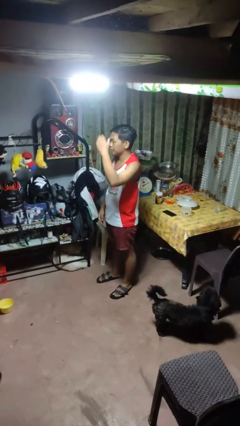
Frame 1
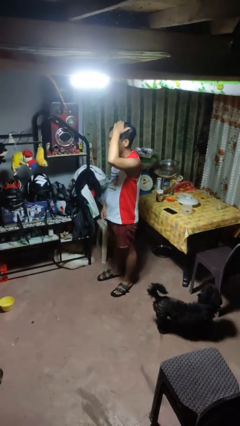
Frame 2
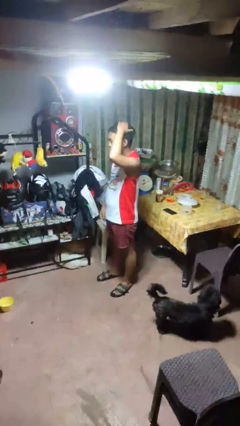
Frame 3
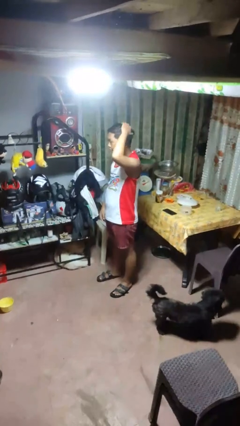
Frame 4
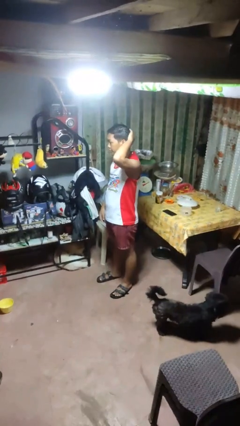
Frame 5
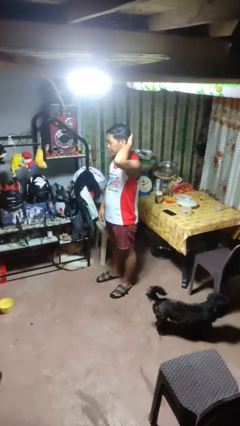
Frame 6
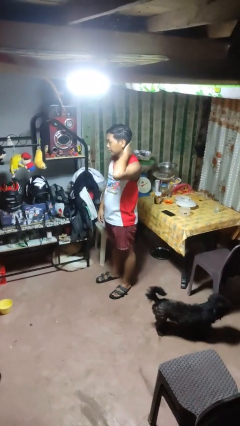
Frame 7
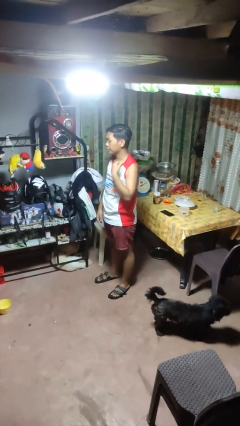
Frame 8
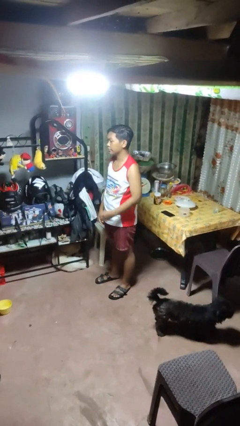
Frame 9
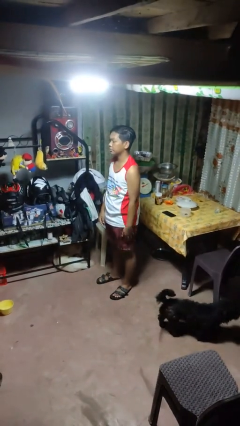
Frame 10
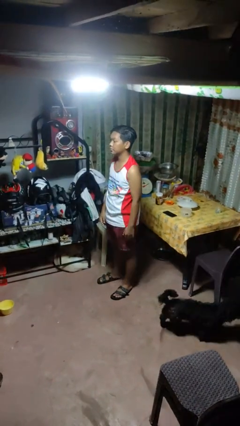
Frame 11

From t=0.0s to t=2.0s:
person pats head

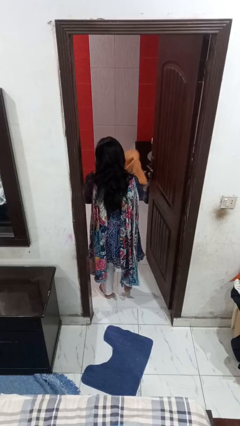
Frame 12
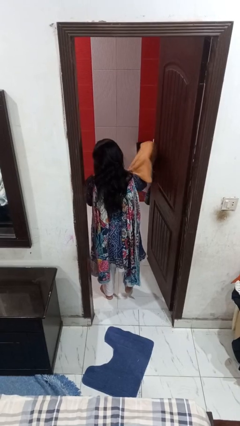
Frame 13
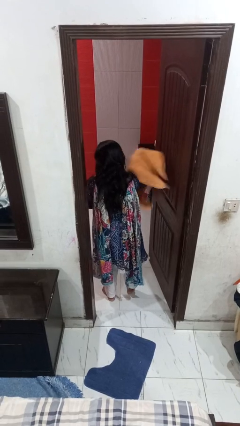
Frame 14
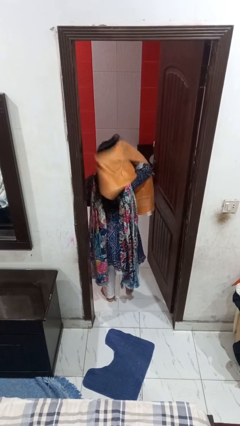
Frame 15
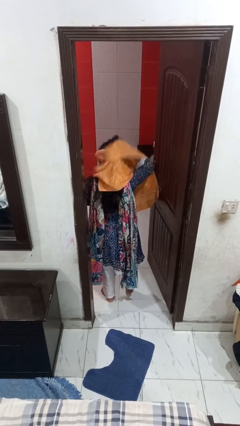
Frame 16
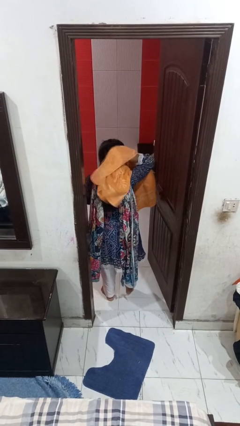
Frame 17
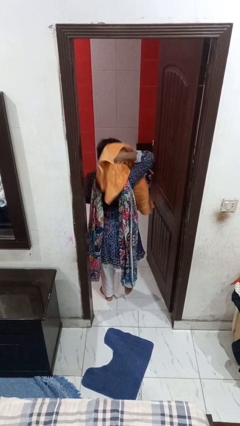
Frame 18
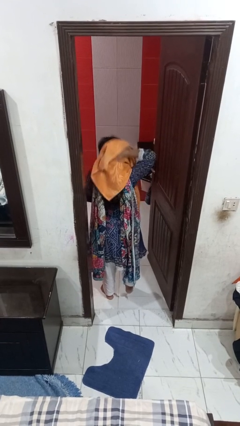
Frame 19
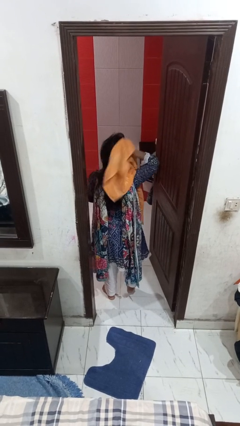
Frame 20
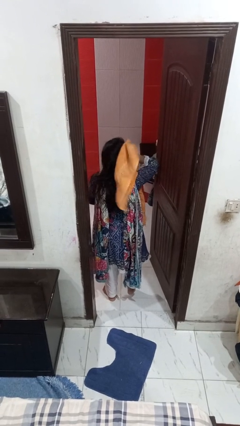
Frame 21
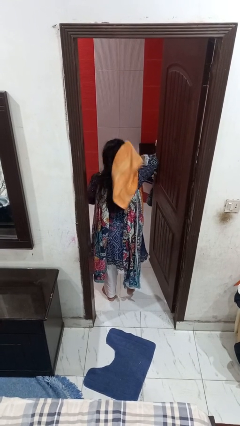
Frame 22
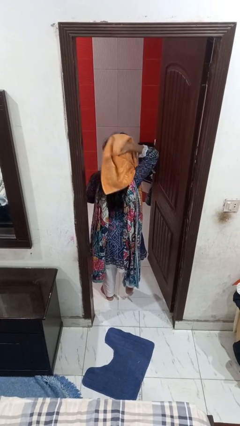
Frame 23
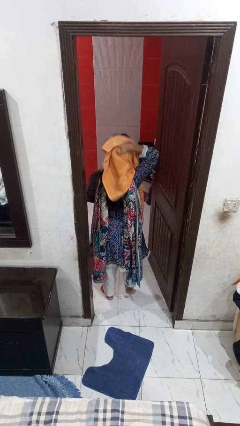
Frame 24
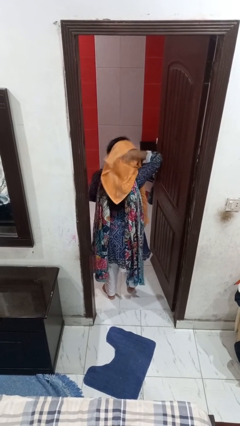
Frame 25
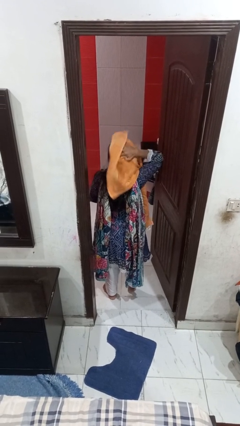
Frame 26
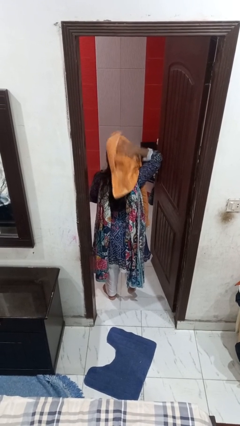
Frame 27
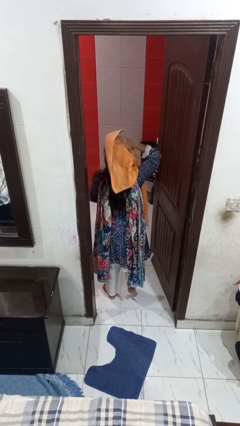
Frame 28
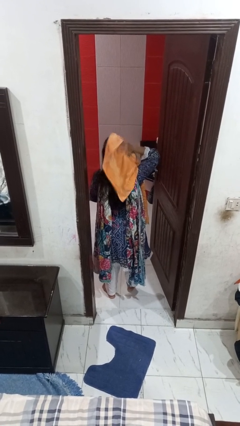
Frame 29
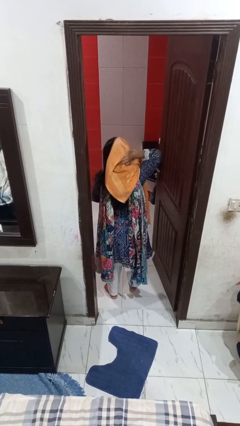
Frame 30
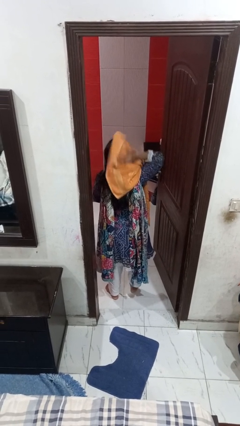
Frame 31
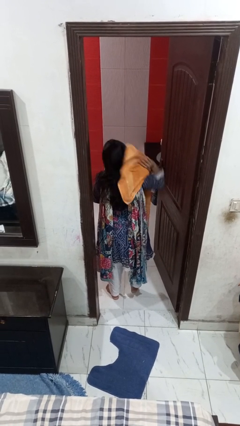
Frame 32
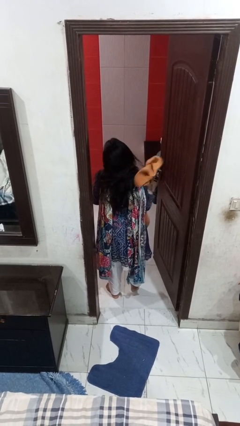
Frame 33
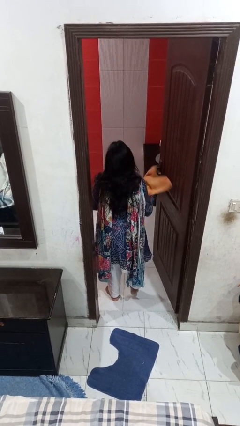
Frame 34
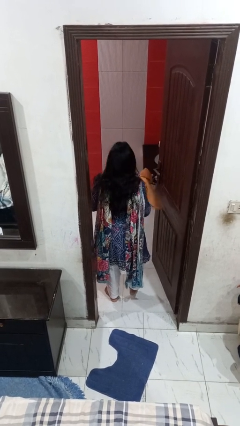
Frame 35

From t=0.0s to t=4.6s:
person dries hair with towel

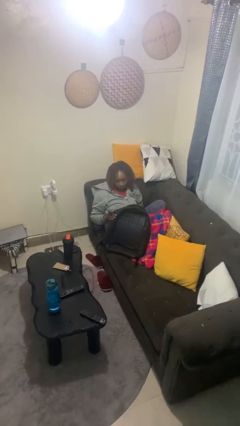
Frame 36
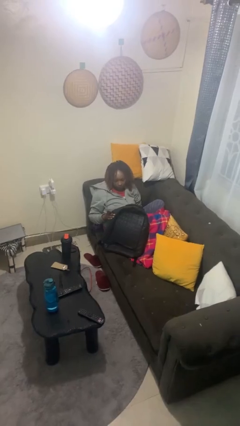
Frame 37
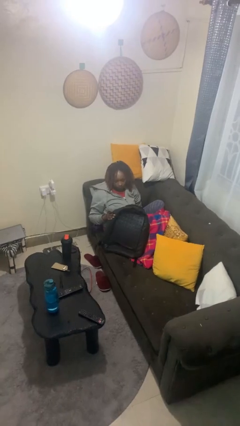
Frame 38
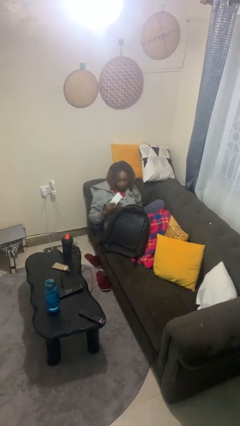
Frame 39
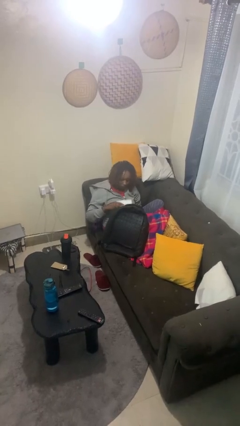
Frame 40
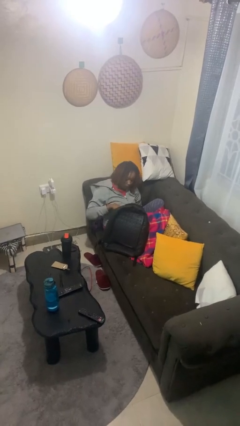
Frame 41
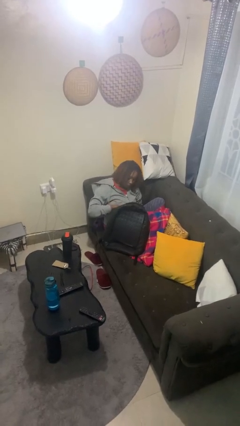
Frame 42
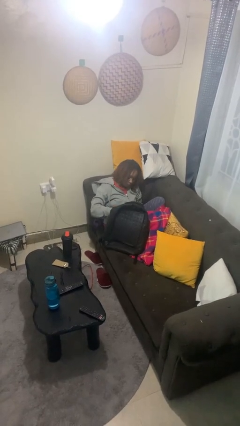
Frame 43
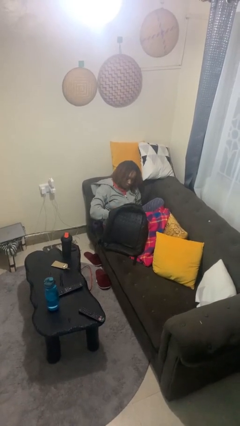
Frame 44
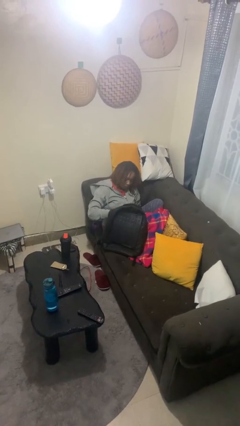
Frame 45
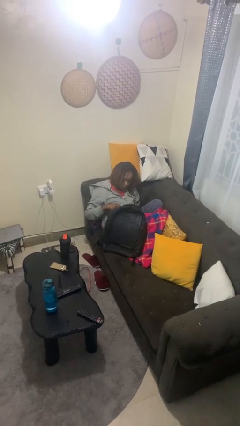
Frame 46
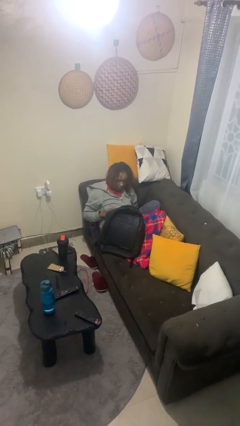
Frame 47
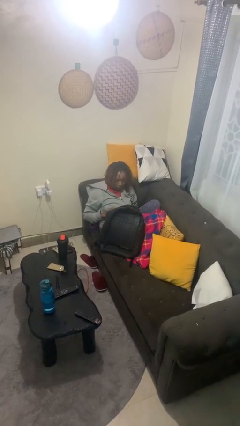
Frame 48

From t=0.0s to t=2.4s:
person puts object into backpack

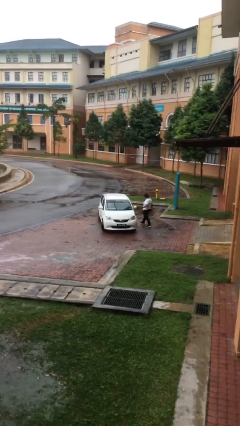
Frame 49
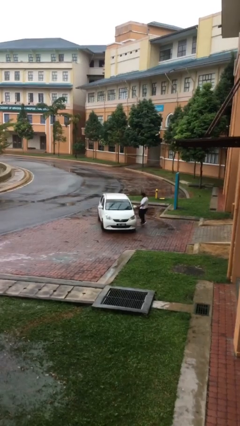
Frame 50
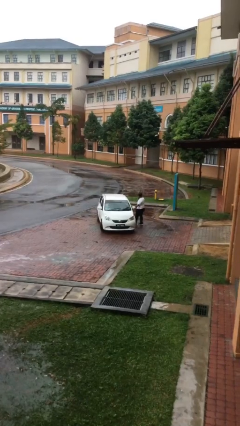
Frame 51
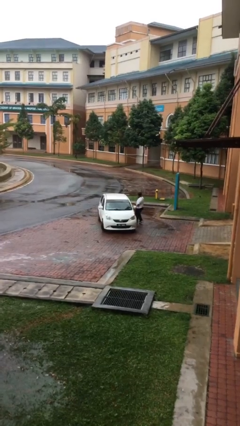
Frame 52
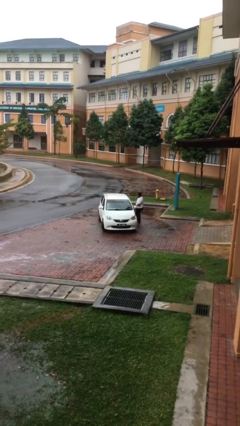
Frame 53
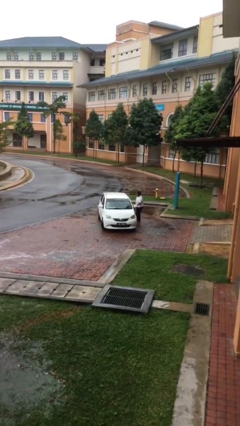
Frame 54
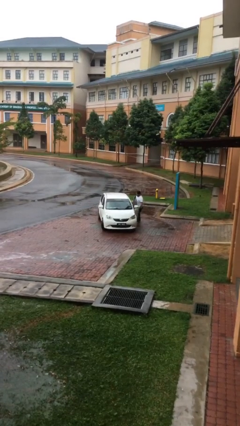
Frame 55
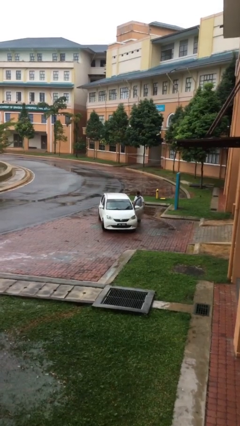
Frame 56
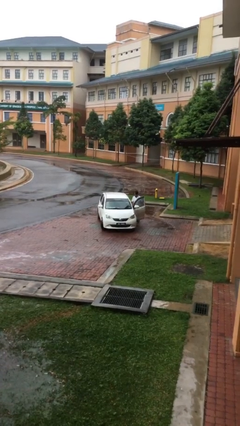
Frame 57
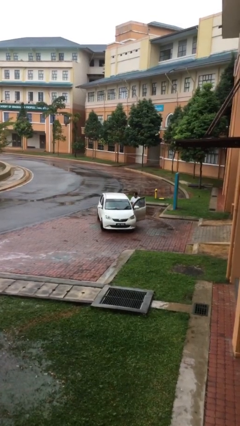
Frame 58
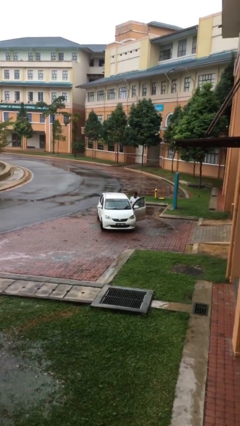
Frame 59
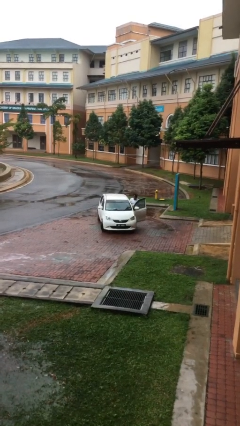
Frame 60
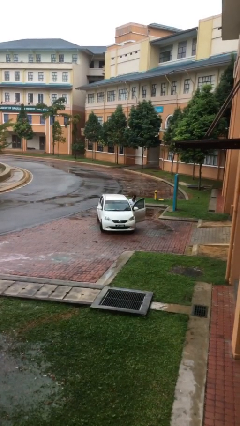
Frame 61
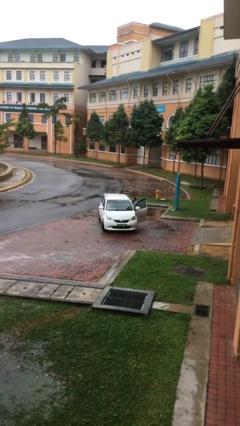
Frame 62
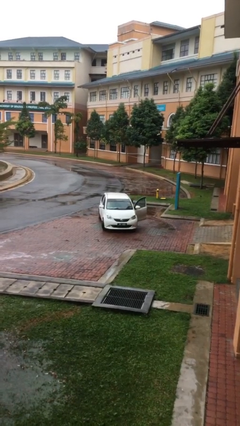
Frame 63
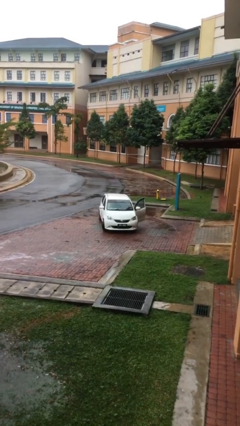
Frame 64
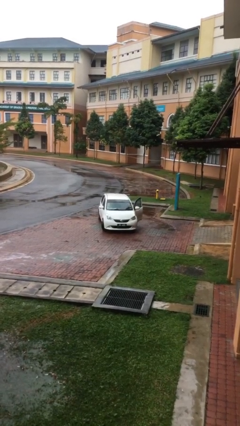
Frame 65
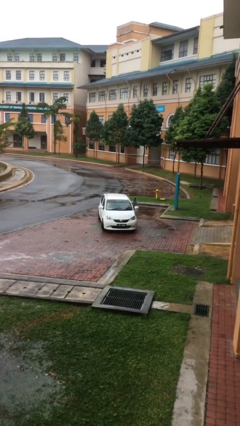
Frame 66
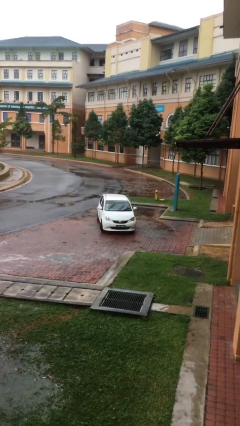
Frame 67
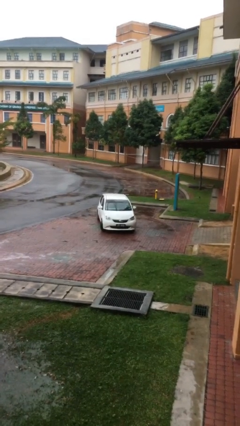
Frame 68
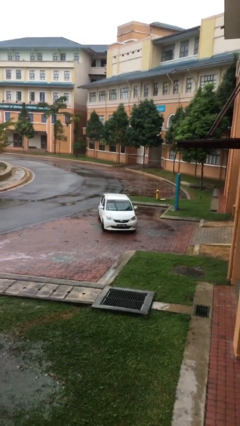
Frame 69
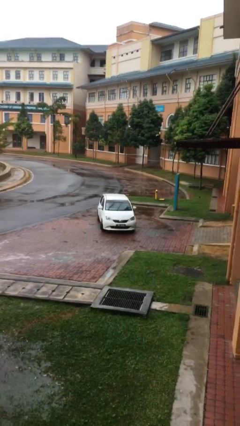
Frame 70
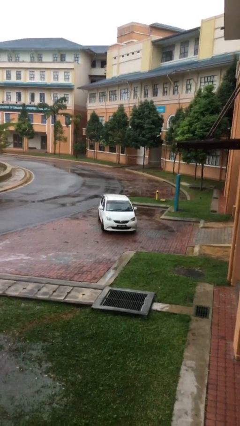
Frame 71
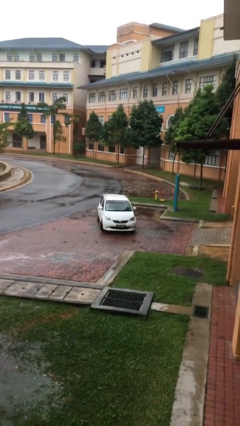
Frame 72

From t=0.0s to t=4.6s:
car picks up person

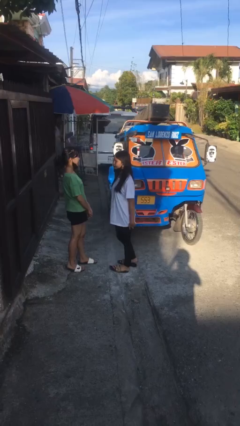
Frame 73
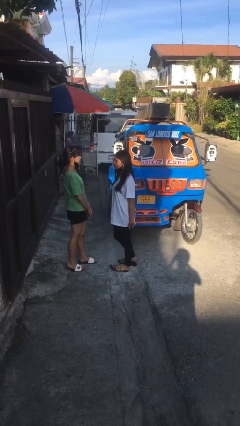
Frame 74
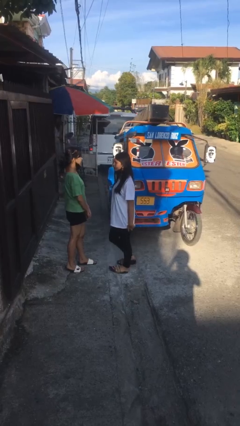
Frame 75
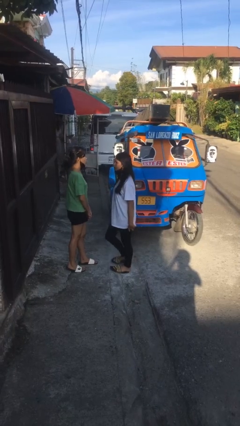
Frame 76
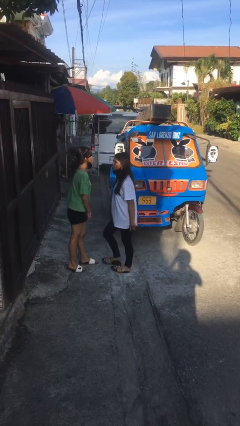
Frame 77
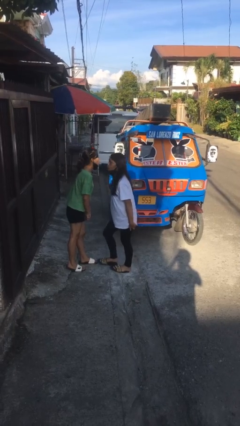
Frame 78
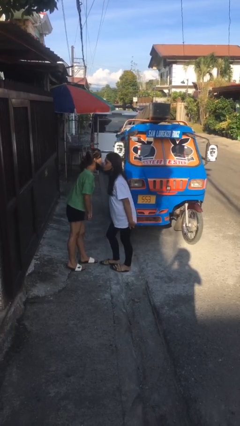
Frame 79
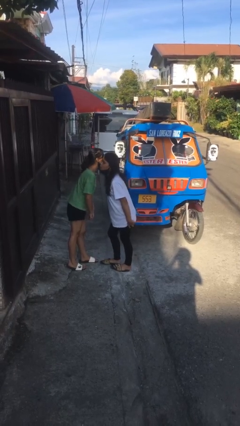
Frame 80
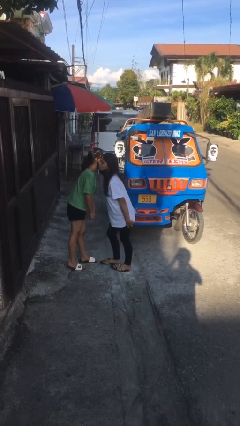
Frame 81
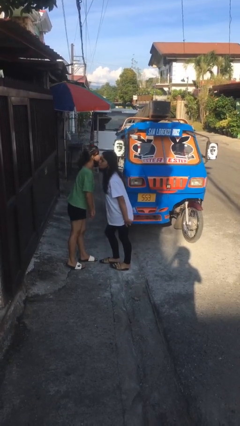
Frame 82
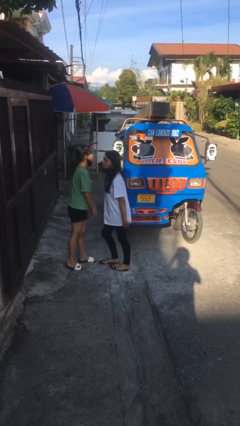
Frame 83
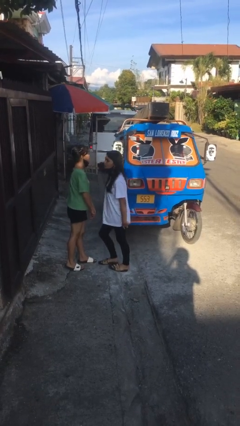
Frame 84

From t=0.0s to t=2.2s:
person kisses cheek of person

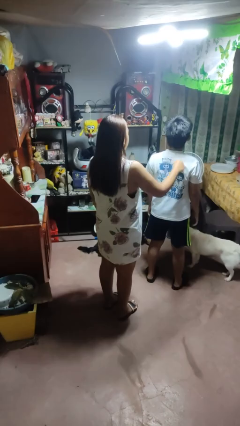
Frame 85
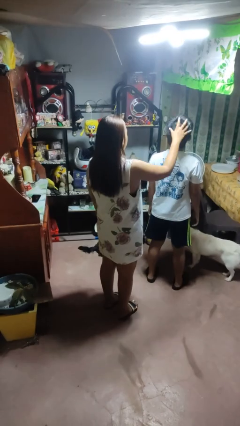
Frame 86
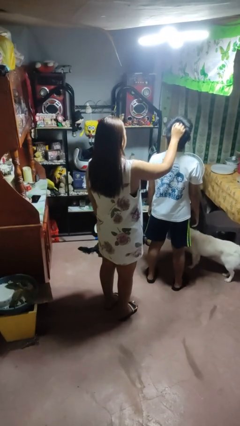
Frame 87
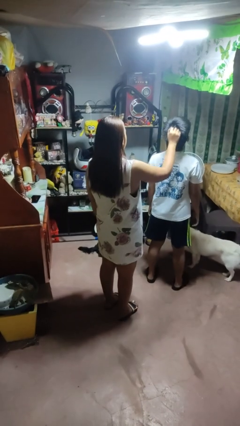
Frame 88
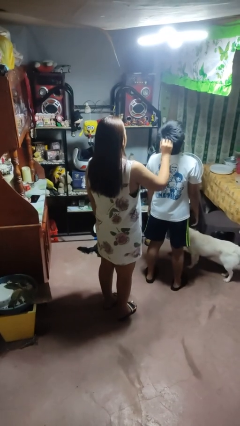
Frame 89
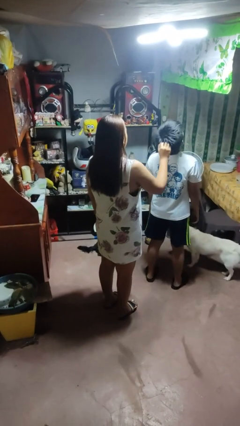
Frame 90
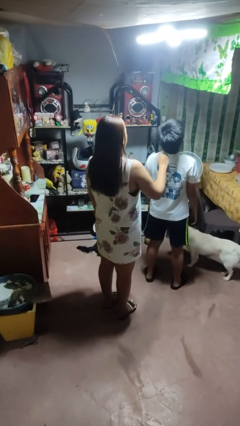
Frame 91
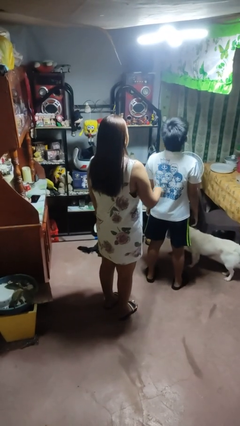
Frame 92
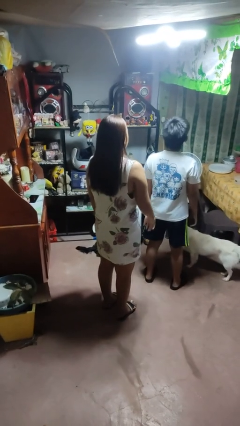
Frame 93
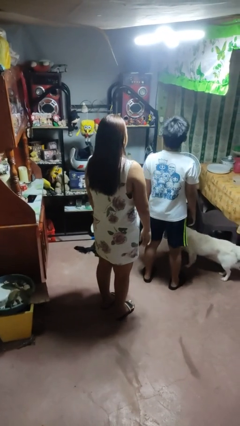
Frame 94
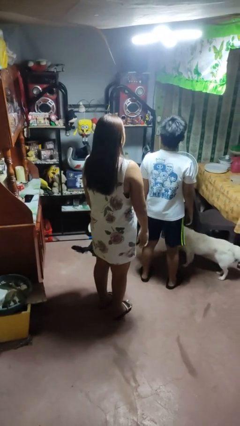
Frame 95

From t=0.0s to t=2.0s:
person grabs person by hair
